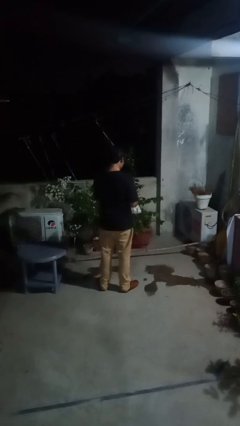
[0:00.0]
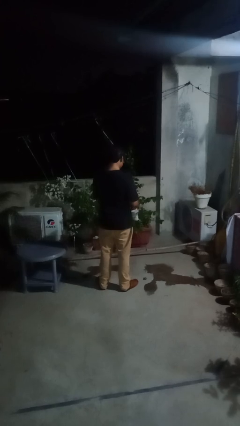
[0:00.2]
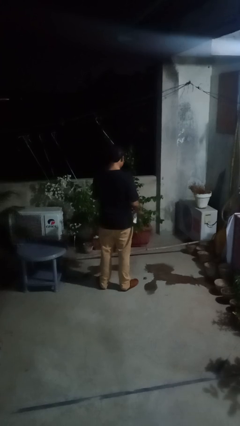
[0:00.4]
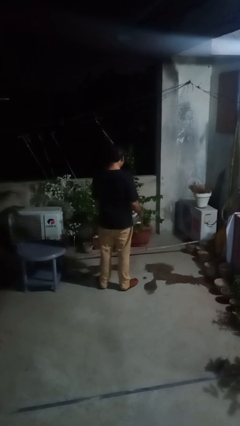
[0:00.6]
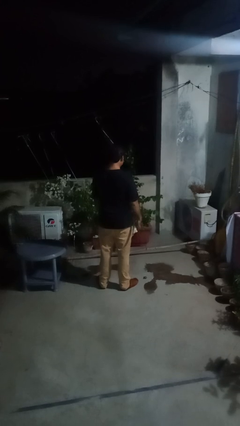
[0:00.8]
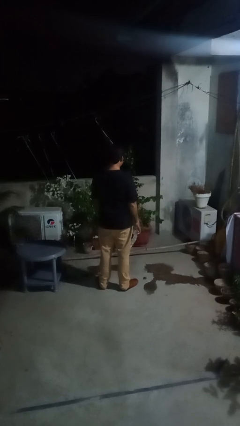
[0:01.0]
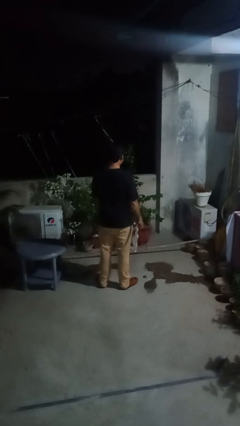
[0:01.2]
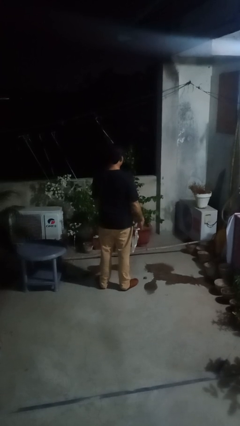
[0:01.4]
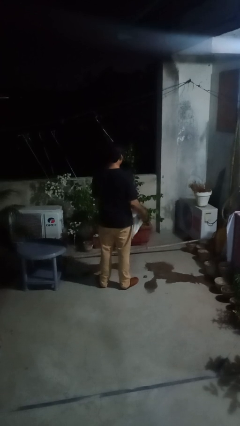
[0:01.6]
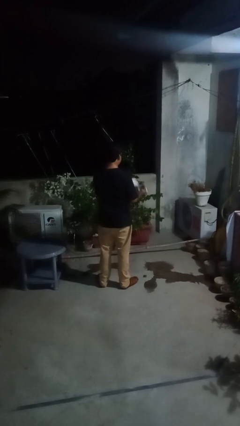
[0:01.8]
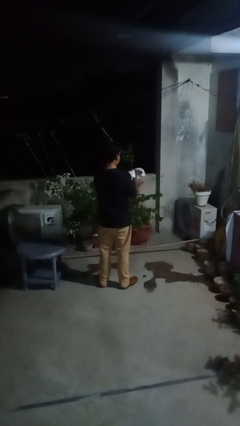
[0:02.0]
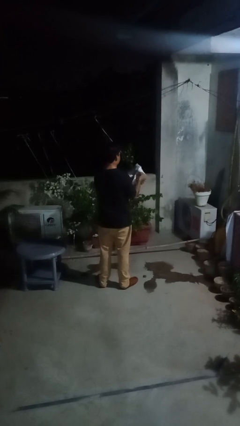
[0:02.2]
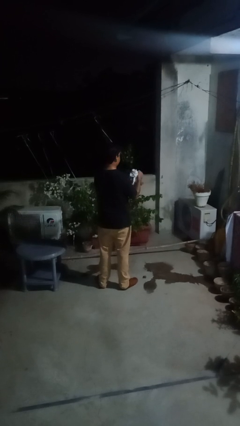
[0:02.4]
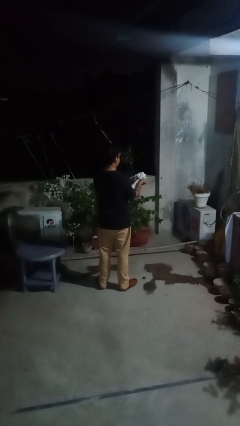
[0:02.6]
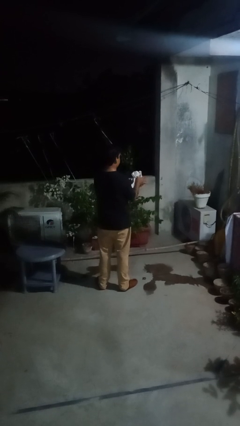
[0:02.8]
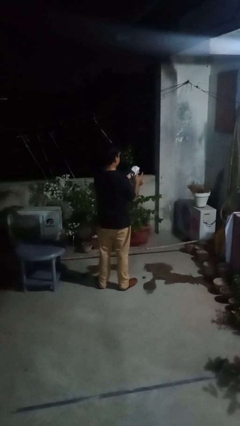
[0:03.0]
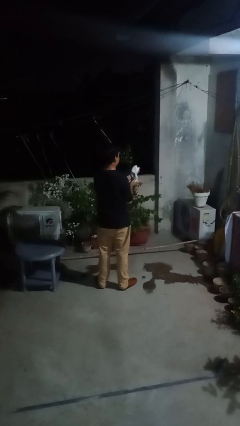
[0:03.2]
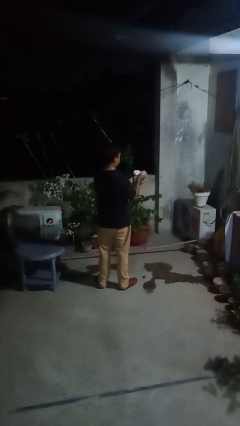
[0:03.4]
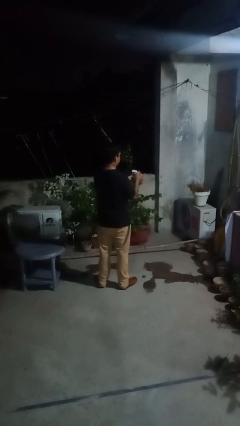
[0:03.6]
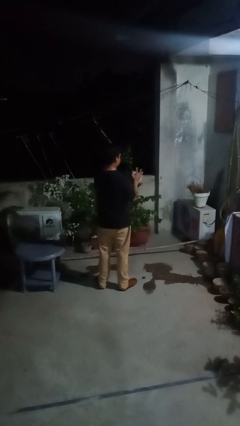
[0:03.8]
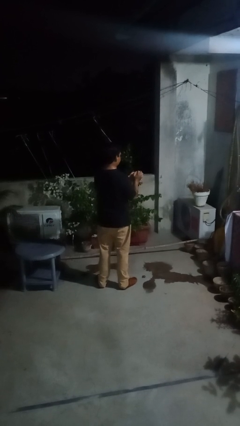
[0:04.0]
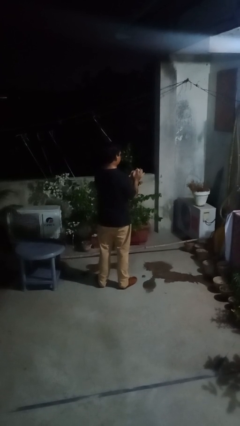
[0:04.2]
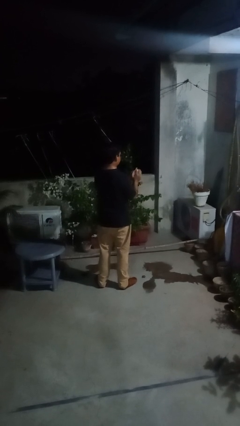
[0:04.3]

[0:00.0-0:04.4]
person crumples paper

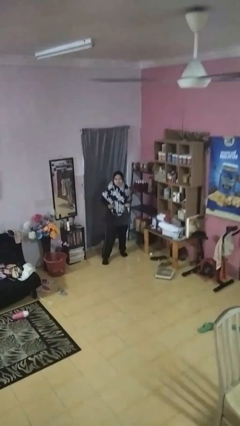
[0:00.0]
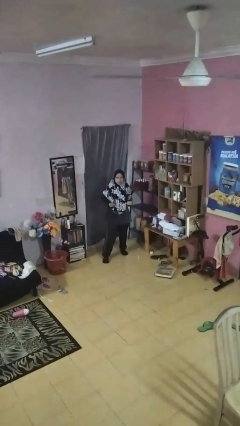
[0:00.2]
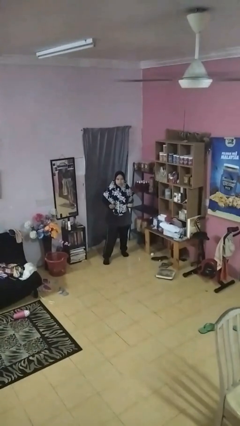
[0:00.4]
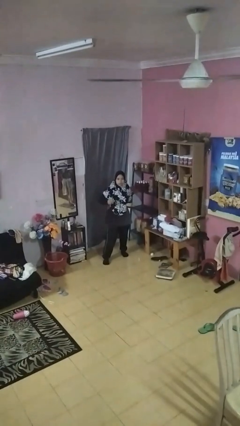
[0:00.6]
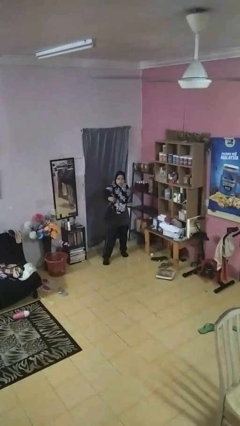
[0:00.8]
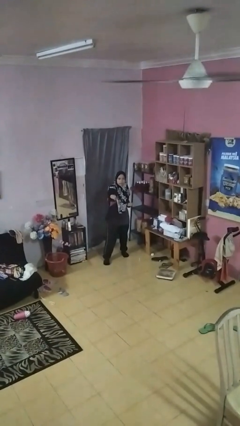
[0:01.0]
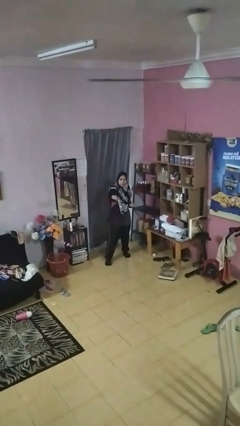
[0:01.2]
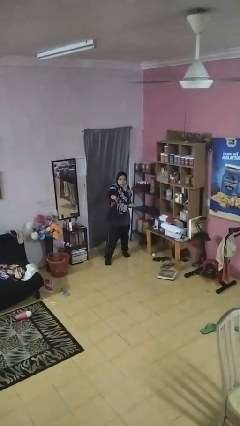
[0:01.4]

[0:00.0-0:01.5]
person punches

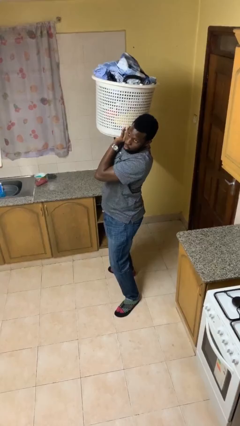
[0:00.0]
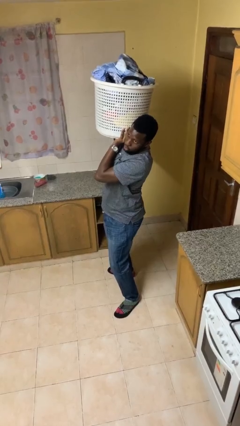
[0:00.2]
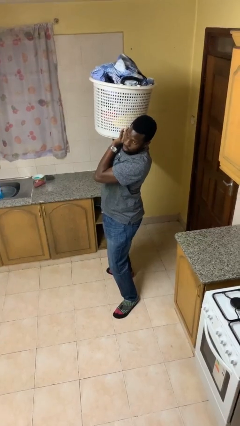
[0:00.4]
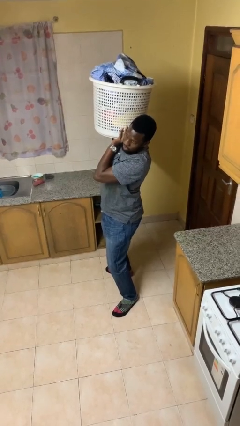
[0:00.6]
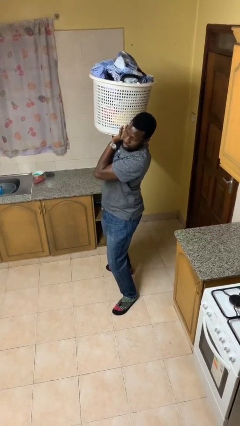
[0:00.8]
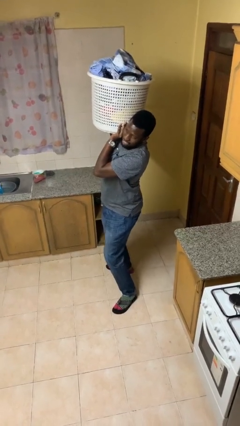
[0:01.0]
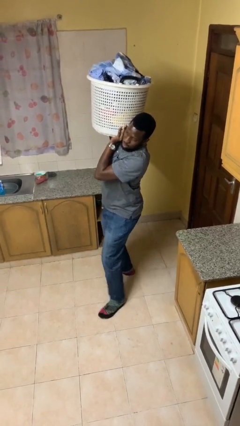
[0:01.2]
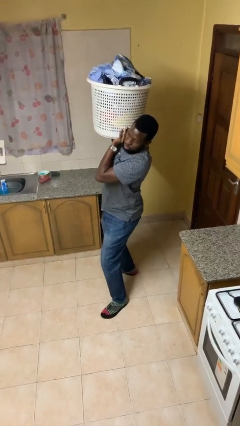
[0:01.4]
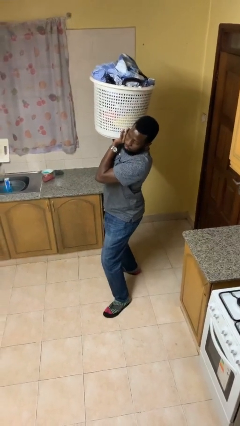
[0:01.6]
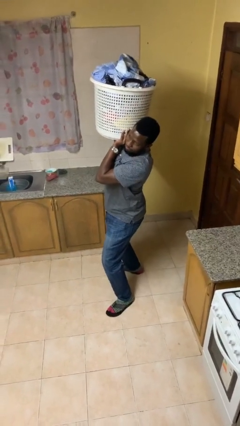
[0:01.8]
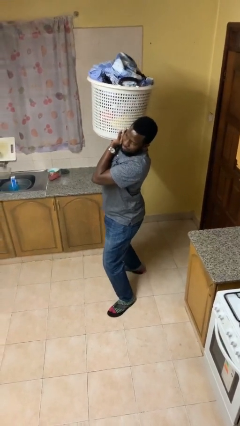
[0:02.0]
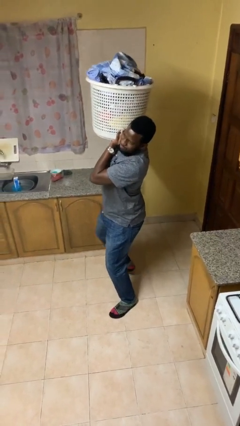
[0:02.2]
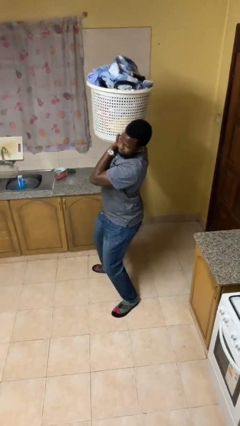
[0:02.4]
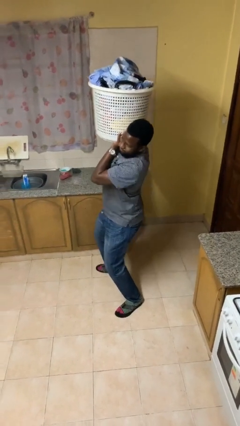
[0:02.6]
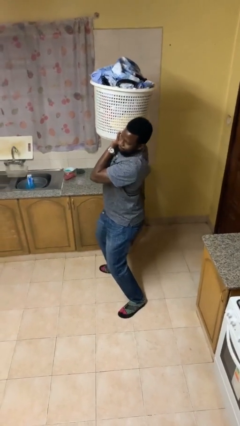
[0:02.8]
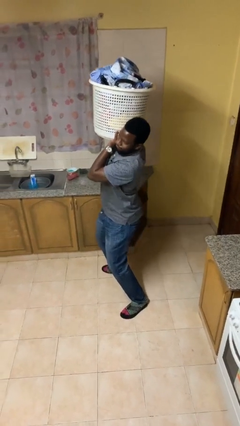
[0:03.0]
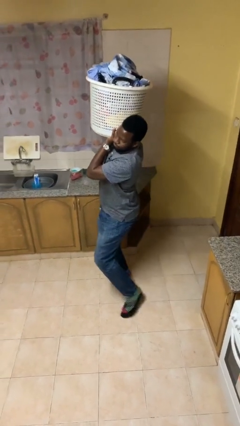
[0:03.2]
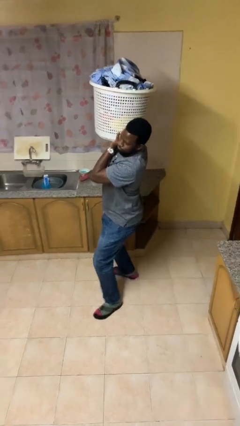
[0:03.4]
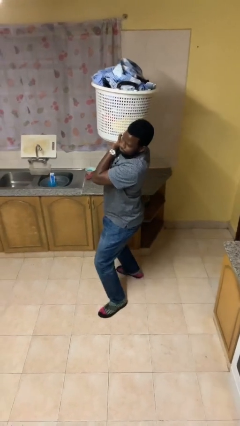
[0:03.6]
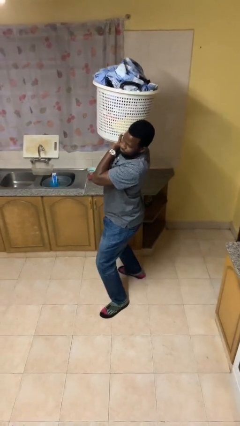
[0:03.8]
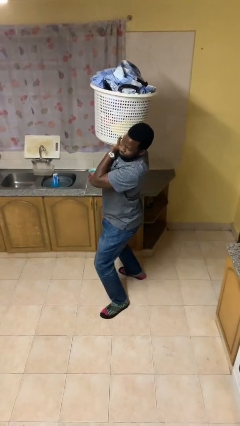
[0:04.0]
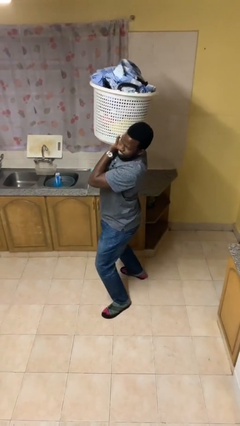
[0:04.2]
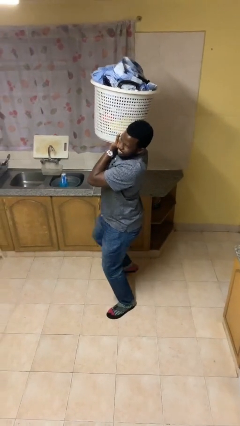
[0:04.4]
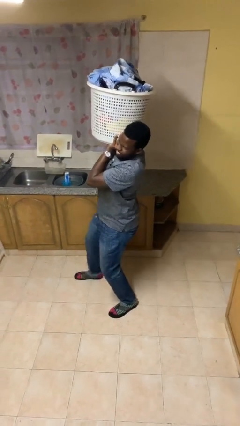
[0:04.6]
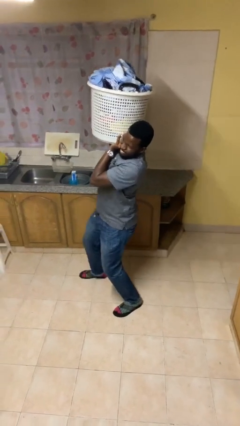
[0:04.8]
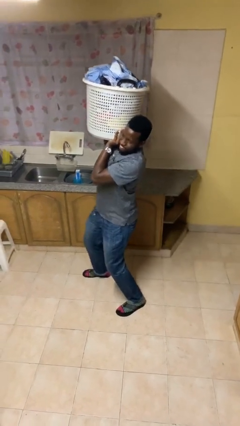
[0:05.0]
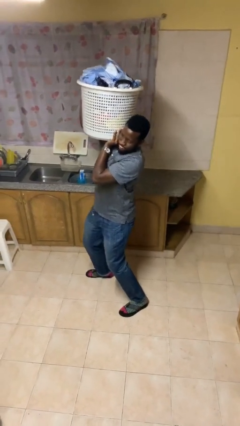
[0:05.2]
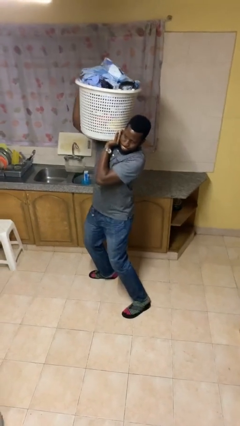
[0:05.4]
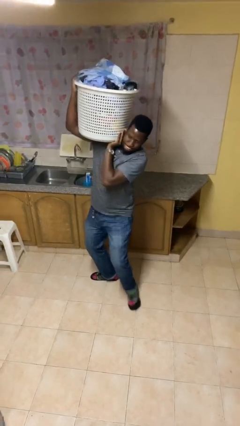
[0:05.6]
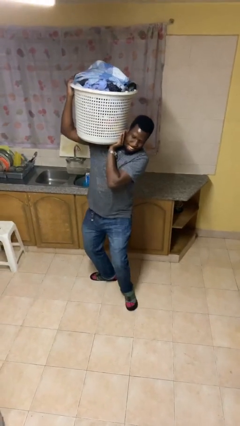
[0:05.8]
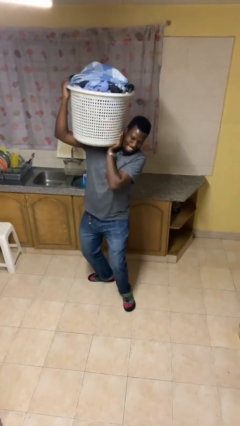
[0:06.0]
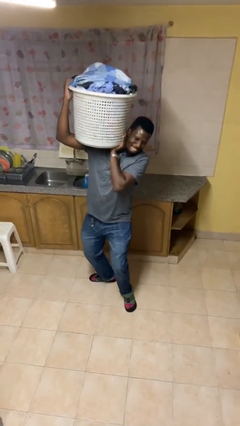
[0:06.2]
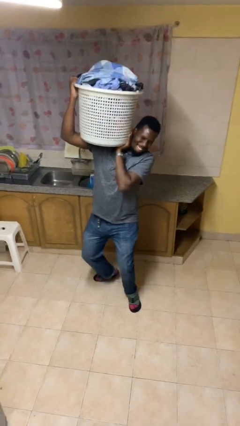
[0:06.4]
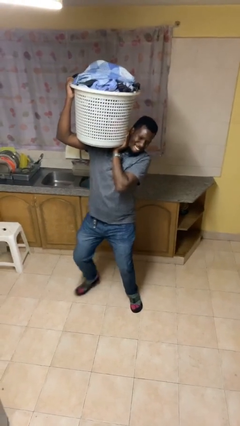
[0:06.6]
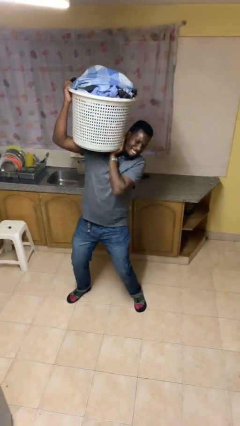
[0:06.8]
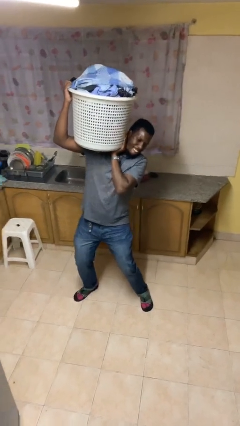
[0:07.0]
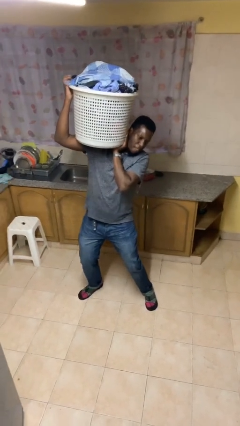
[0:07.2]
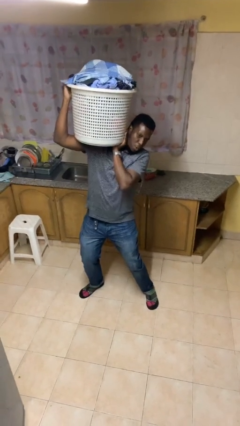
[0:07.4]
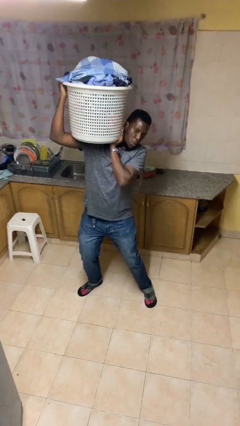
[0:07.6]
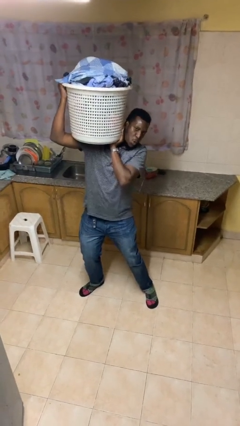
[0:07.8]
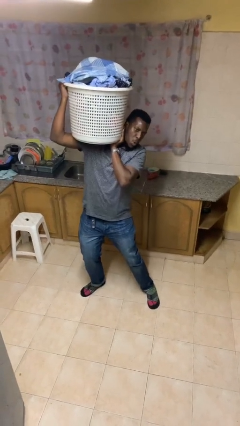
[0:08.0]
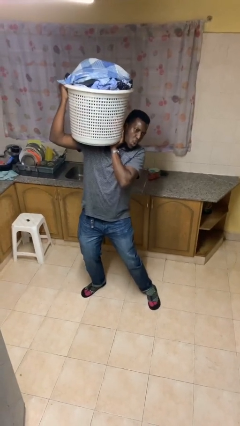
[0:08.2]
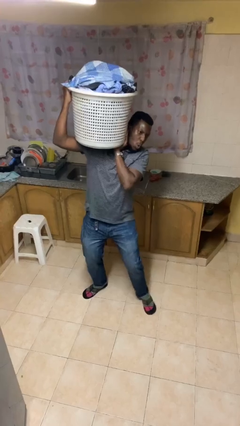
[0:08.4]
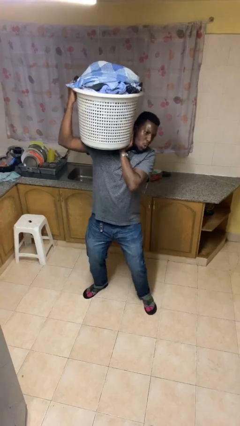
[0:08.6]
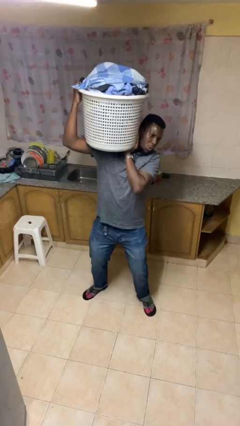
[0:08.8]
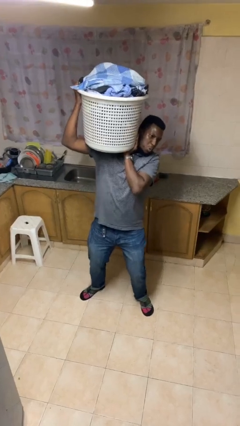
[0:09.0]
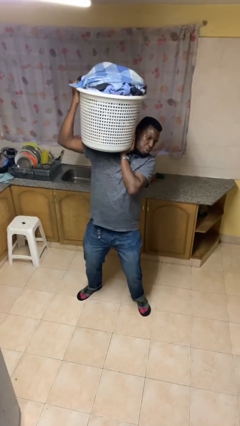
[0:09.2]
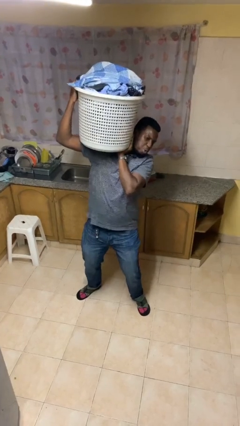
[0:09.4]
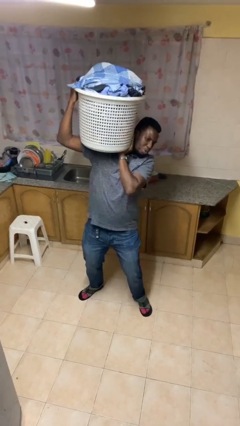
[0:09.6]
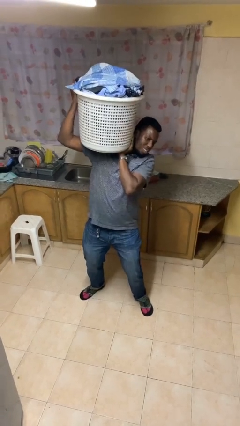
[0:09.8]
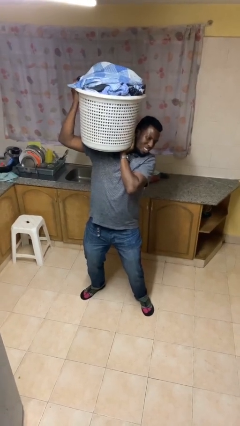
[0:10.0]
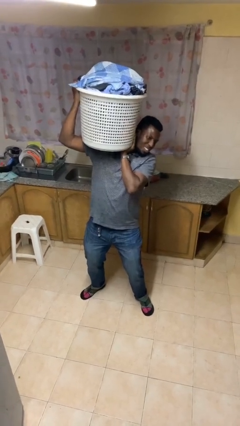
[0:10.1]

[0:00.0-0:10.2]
person carries heavy object

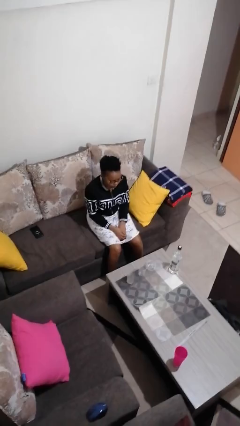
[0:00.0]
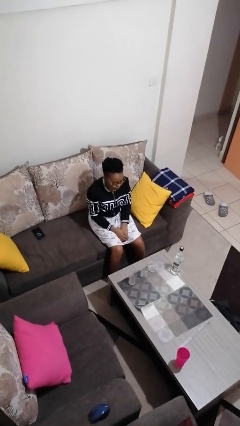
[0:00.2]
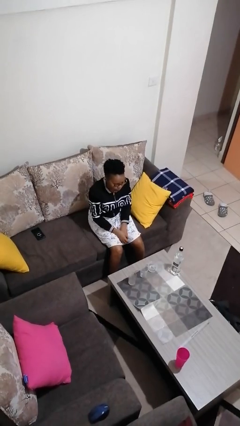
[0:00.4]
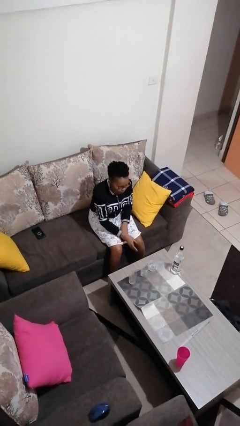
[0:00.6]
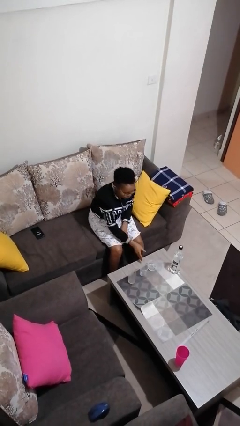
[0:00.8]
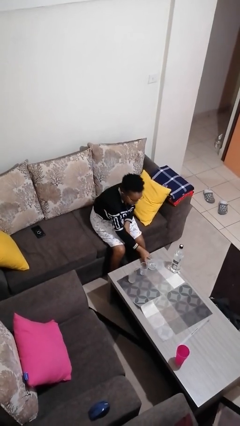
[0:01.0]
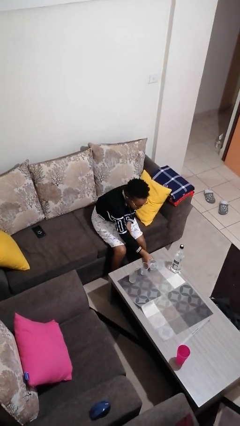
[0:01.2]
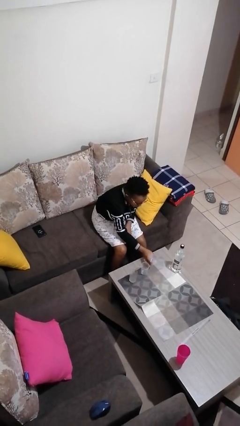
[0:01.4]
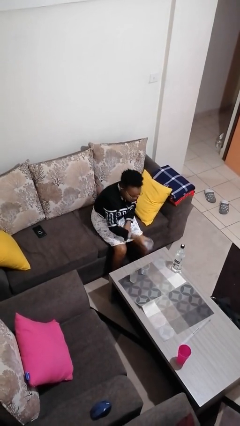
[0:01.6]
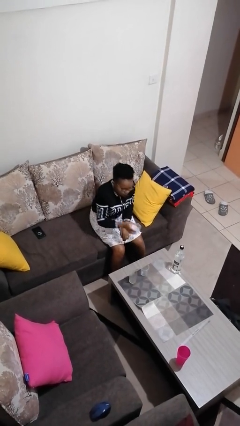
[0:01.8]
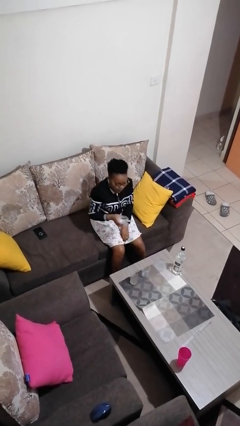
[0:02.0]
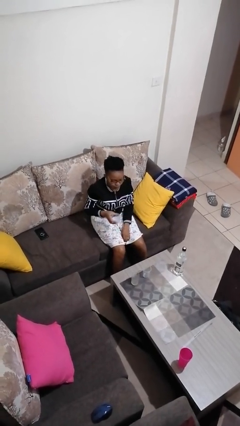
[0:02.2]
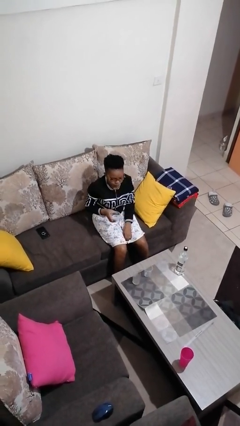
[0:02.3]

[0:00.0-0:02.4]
person picks up object from table
